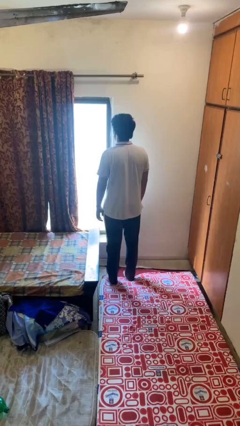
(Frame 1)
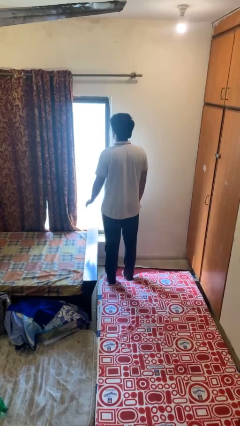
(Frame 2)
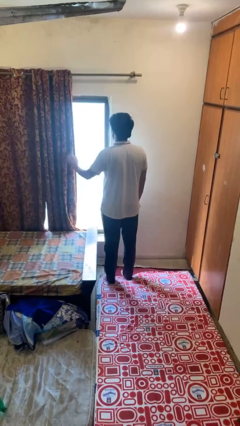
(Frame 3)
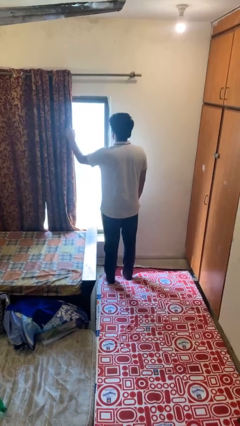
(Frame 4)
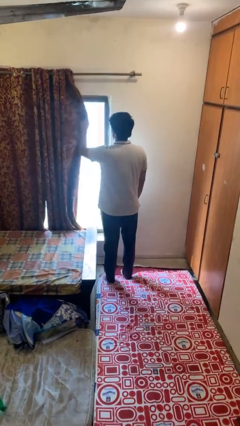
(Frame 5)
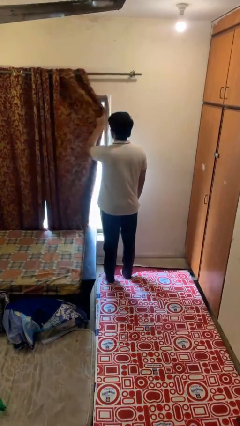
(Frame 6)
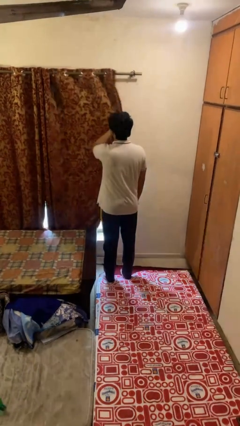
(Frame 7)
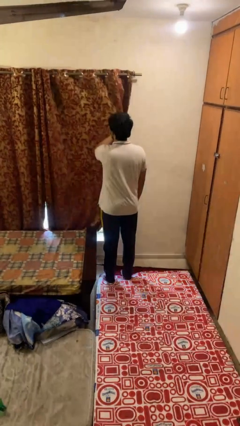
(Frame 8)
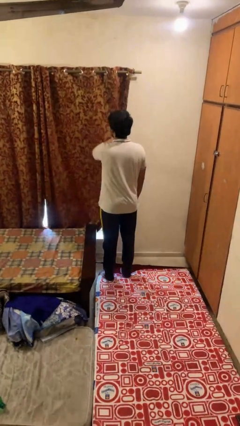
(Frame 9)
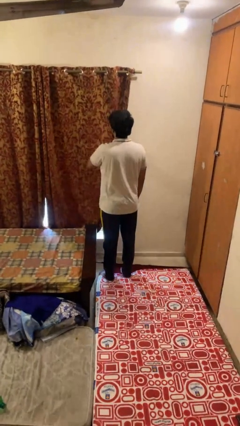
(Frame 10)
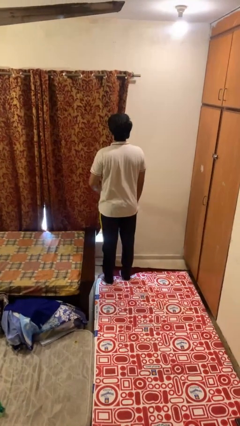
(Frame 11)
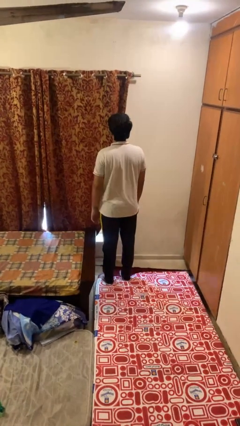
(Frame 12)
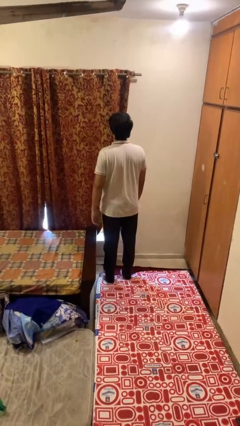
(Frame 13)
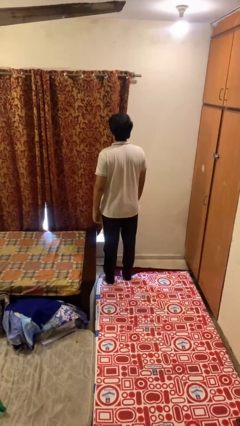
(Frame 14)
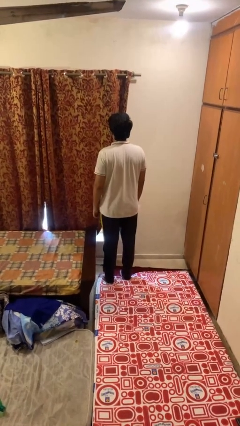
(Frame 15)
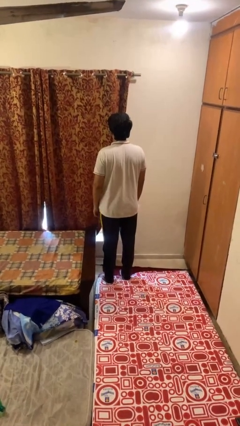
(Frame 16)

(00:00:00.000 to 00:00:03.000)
person closes curtains

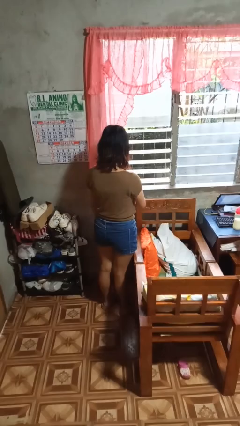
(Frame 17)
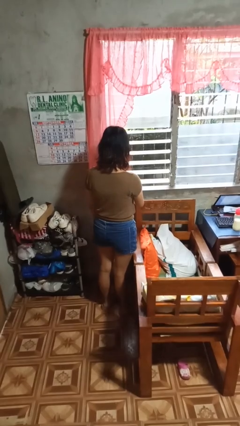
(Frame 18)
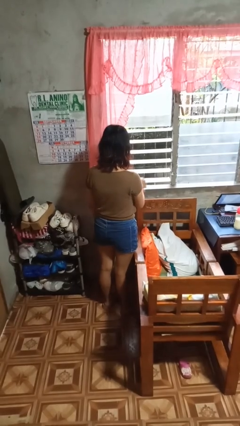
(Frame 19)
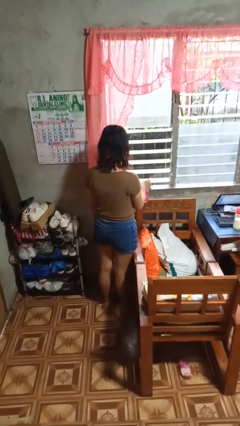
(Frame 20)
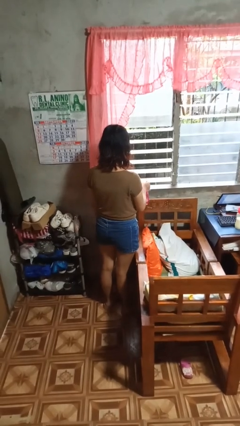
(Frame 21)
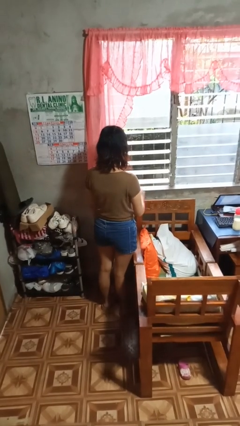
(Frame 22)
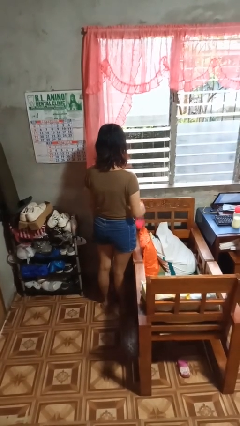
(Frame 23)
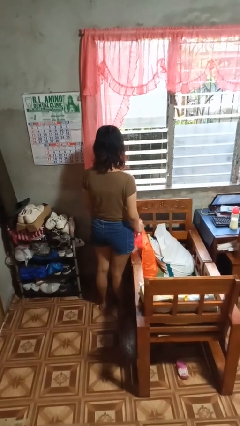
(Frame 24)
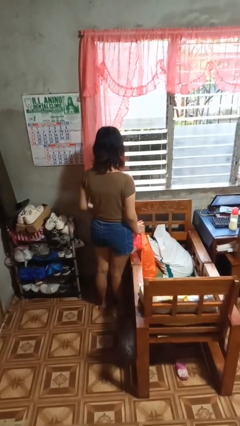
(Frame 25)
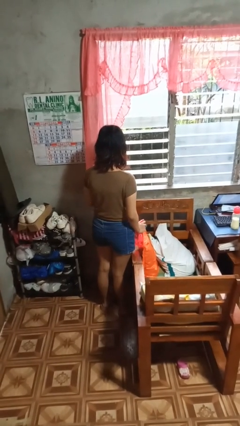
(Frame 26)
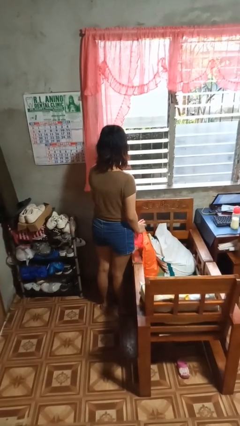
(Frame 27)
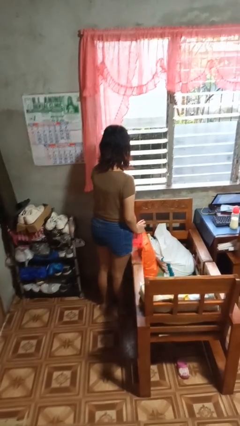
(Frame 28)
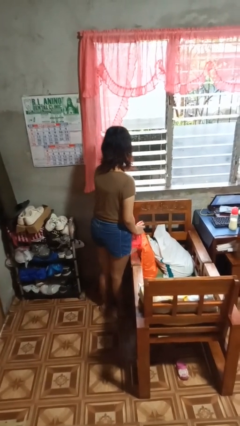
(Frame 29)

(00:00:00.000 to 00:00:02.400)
person sprays from bottle

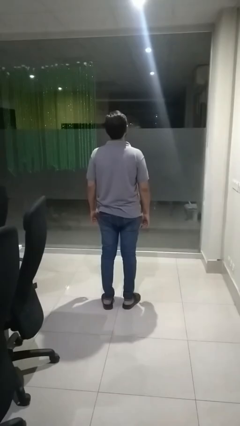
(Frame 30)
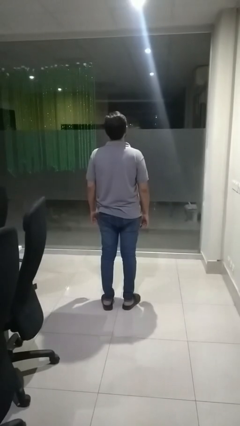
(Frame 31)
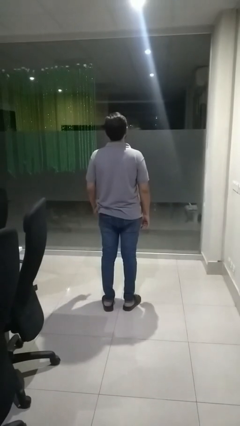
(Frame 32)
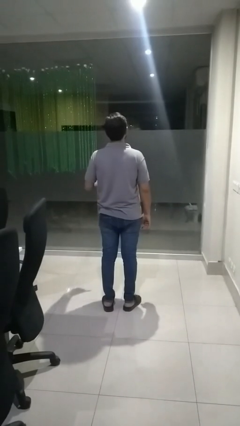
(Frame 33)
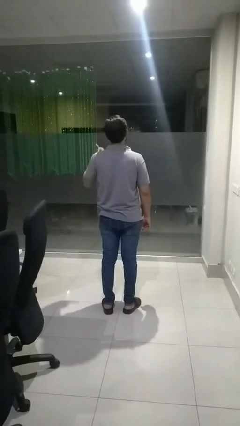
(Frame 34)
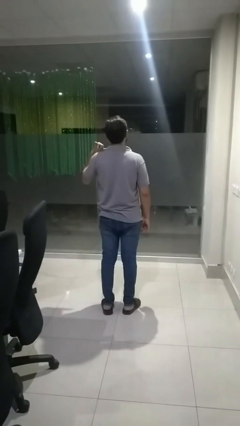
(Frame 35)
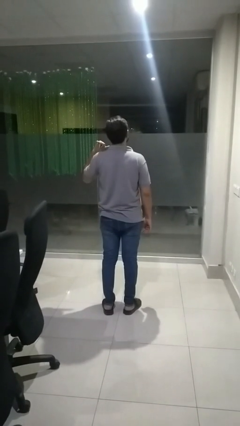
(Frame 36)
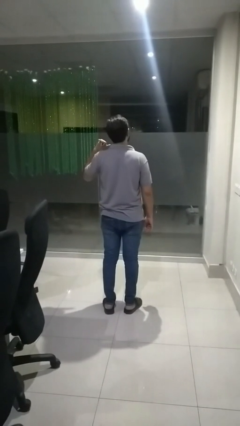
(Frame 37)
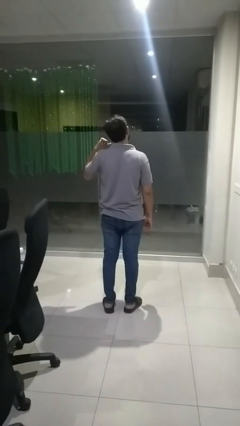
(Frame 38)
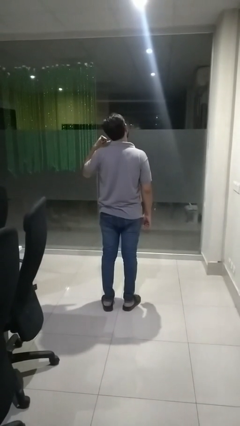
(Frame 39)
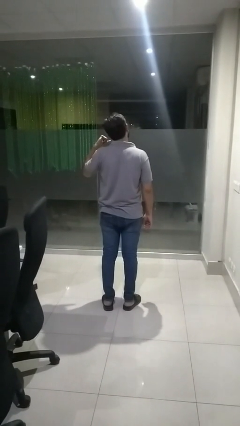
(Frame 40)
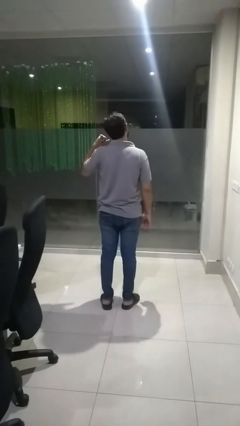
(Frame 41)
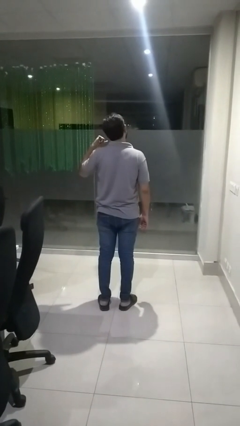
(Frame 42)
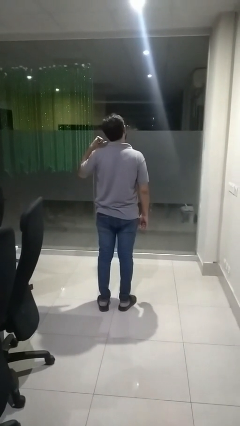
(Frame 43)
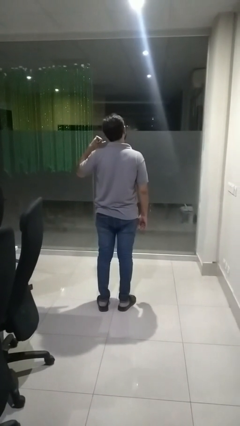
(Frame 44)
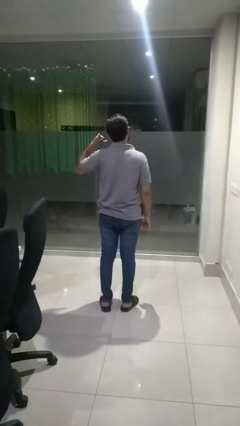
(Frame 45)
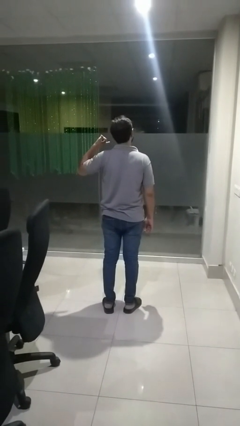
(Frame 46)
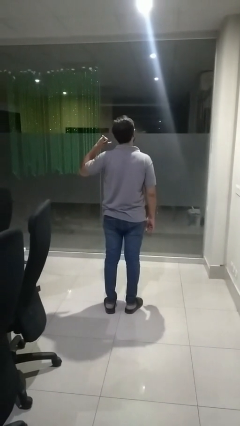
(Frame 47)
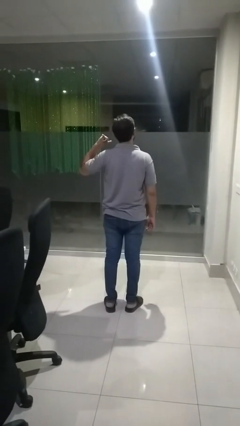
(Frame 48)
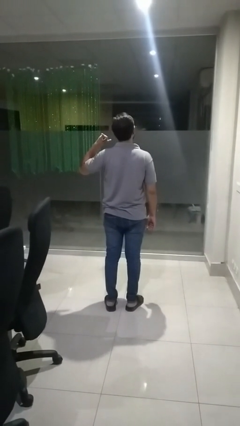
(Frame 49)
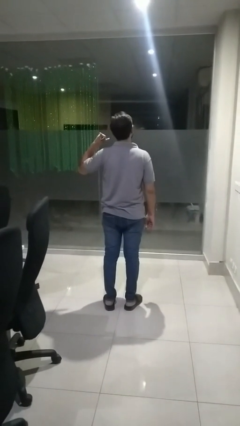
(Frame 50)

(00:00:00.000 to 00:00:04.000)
person gestures call me

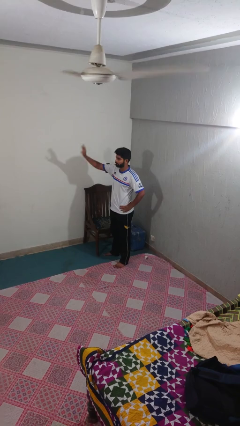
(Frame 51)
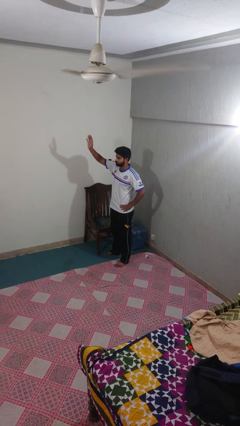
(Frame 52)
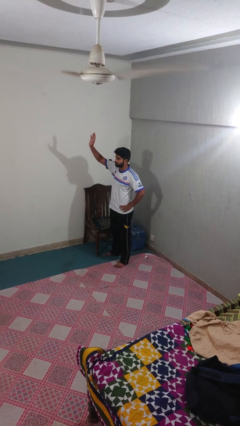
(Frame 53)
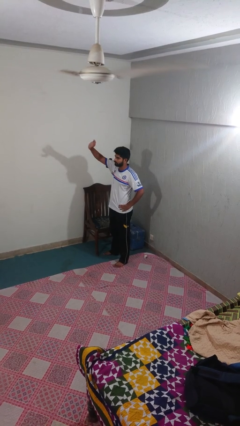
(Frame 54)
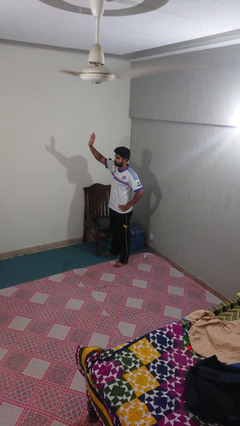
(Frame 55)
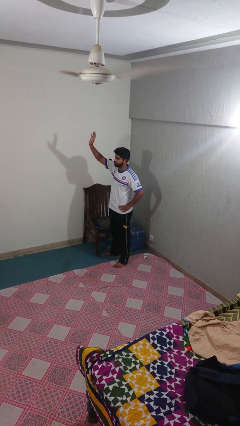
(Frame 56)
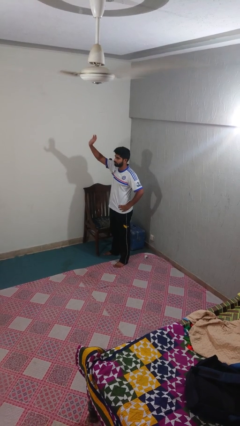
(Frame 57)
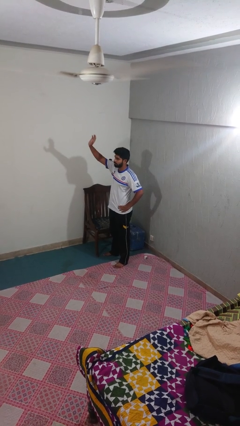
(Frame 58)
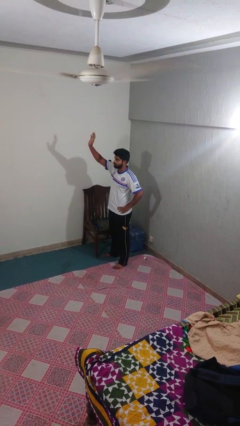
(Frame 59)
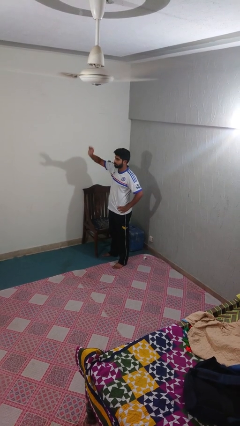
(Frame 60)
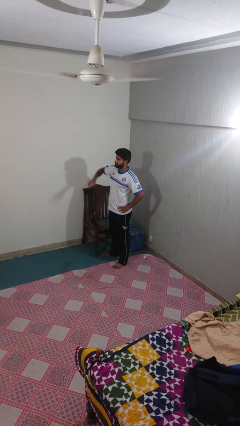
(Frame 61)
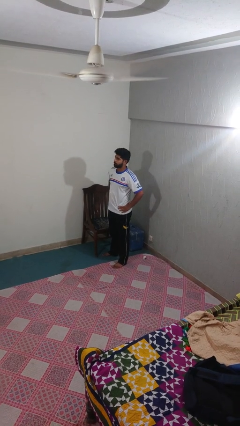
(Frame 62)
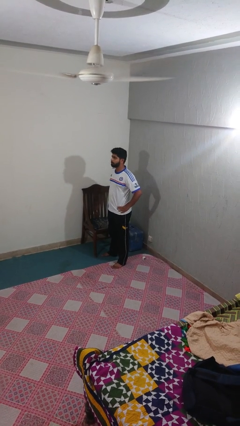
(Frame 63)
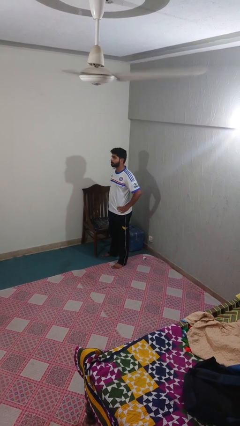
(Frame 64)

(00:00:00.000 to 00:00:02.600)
person waves at person

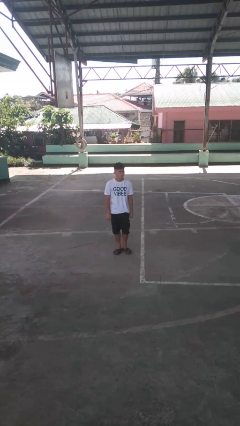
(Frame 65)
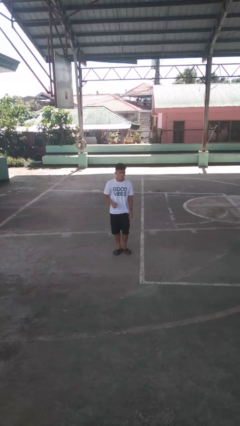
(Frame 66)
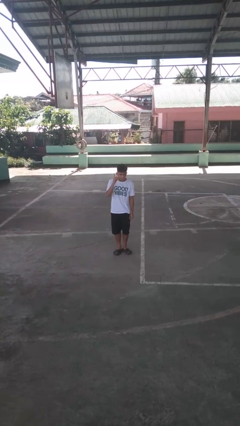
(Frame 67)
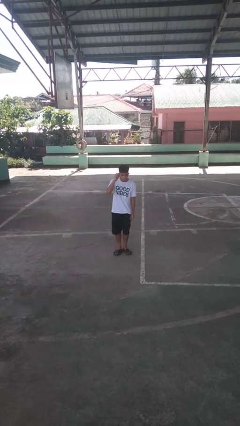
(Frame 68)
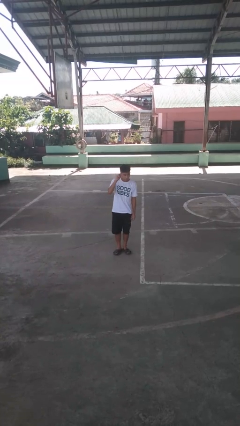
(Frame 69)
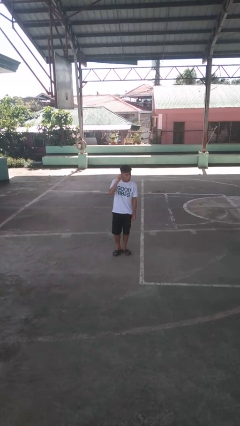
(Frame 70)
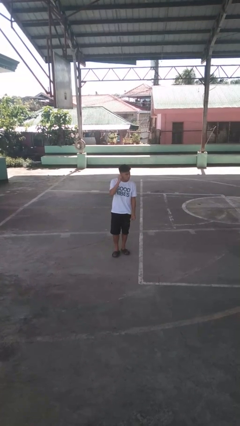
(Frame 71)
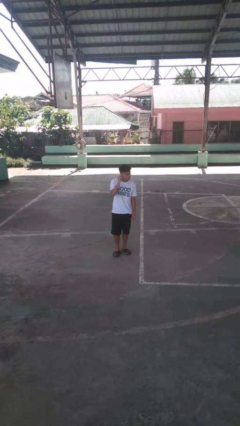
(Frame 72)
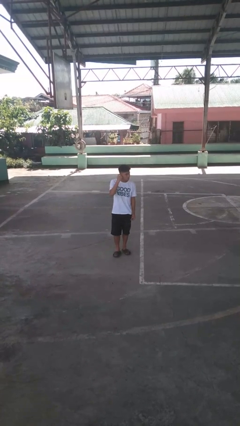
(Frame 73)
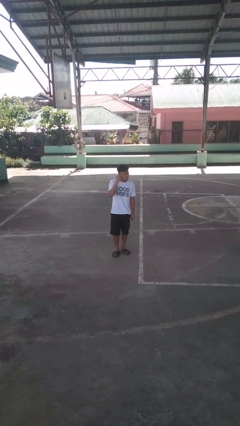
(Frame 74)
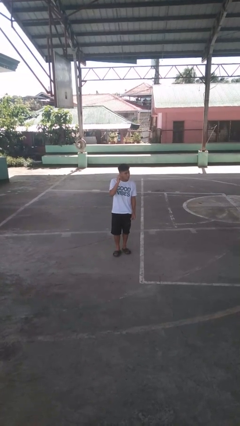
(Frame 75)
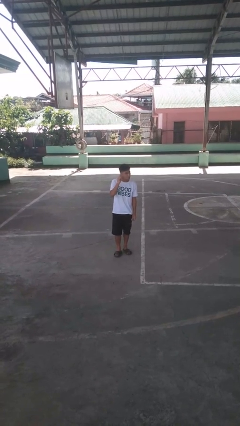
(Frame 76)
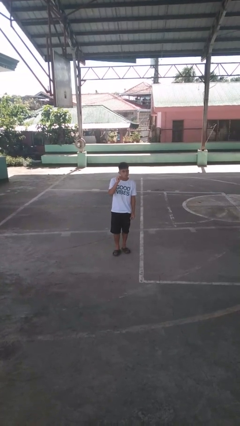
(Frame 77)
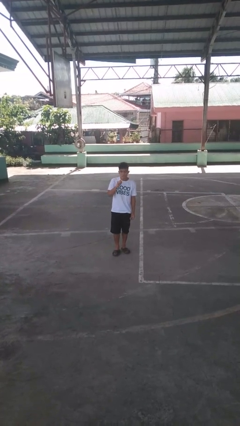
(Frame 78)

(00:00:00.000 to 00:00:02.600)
person touches earlobe

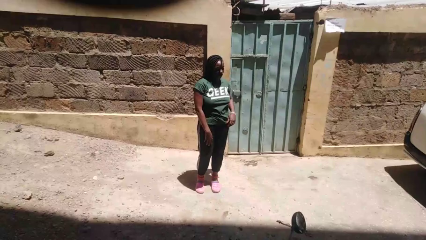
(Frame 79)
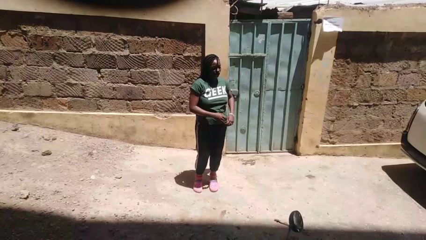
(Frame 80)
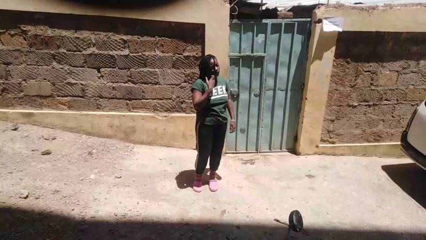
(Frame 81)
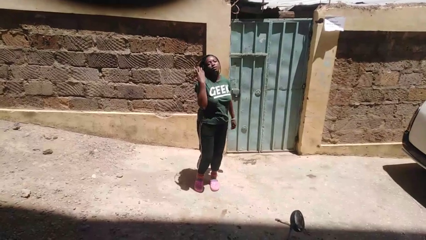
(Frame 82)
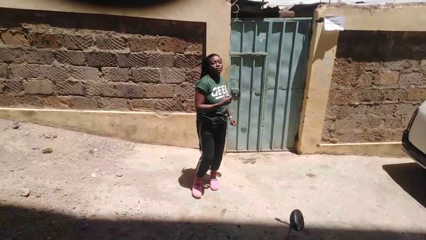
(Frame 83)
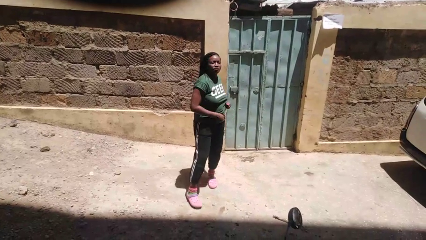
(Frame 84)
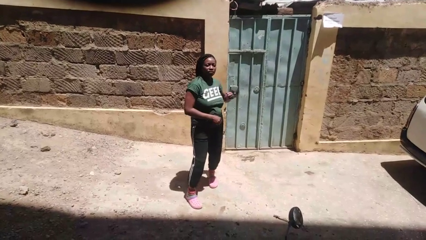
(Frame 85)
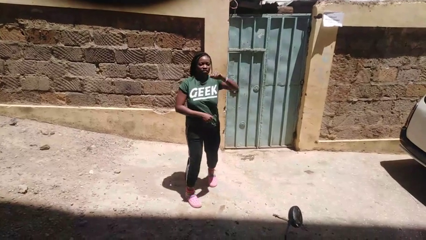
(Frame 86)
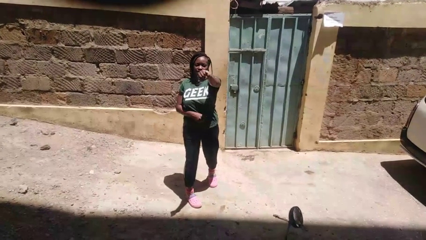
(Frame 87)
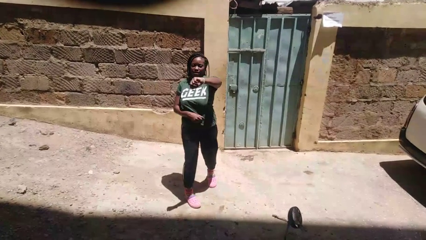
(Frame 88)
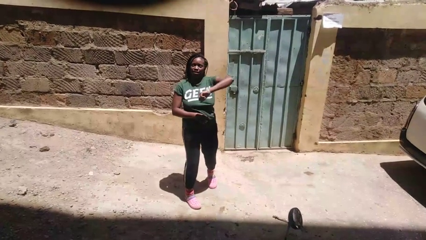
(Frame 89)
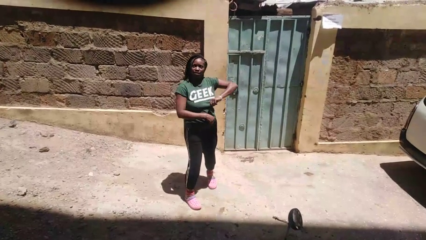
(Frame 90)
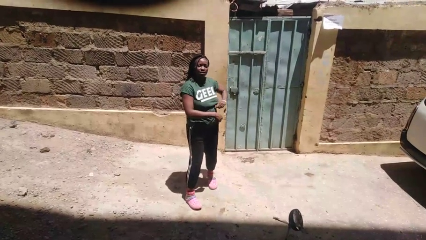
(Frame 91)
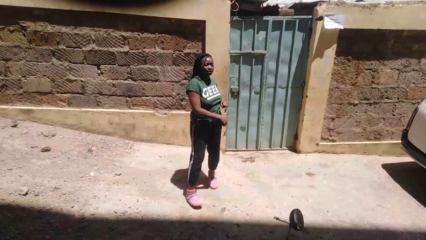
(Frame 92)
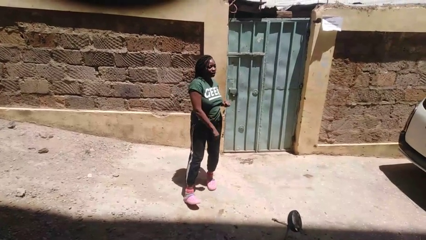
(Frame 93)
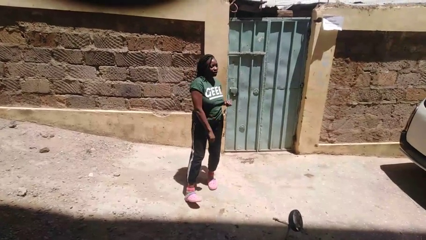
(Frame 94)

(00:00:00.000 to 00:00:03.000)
person punches
